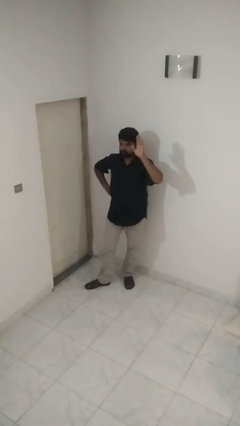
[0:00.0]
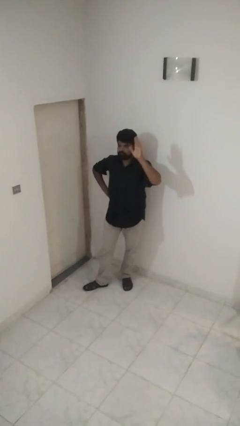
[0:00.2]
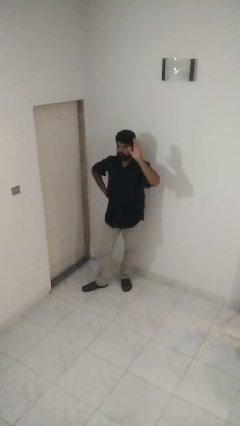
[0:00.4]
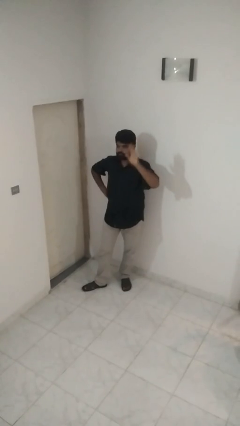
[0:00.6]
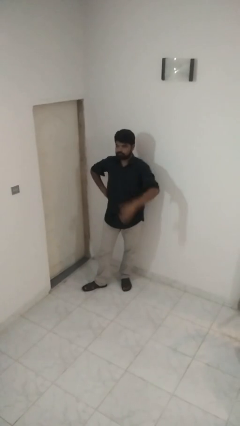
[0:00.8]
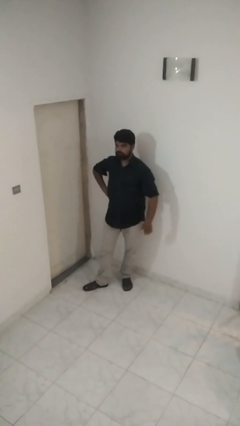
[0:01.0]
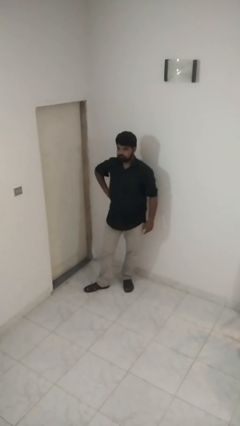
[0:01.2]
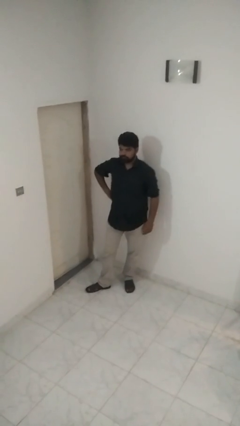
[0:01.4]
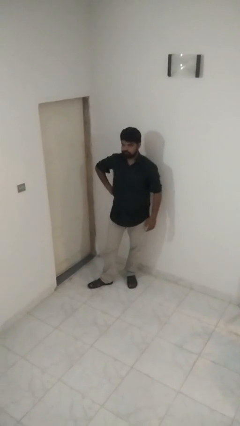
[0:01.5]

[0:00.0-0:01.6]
person gestures lower hand

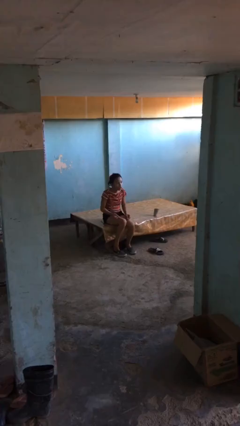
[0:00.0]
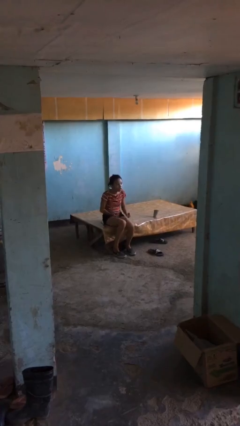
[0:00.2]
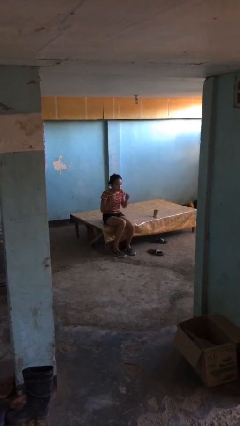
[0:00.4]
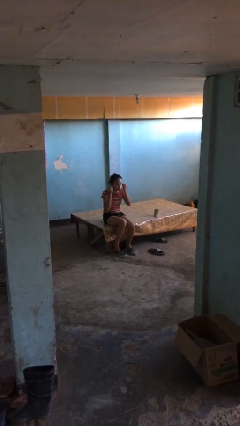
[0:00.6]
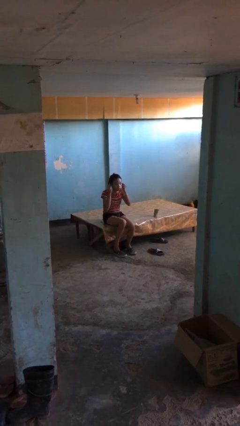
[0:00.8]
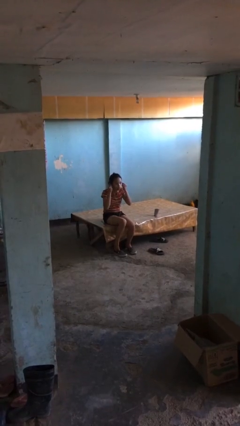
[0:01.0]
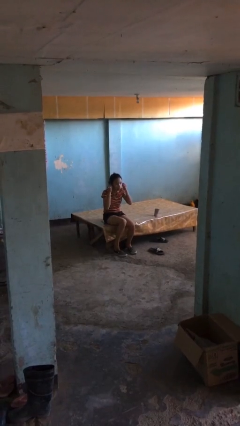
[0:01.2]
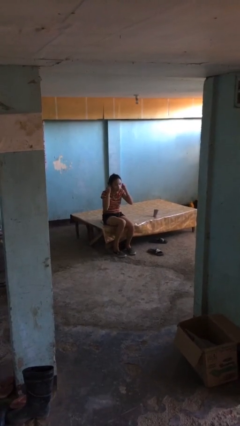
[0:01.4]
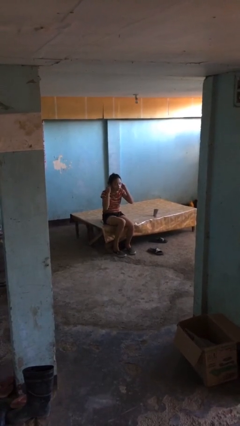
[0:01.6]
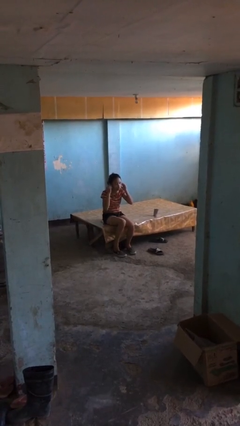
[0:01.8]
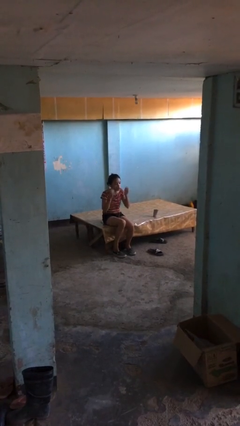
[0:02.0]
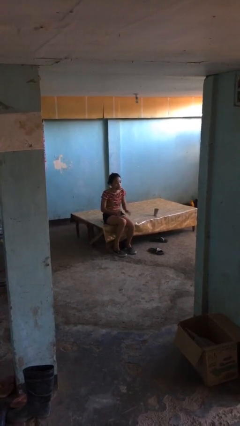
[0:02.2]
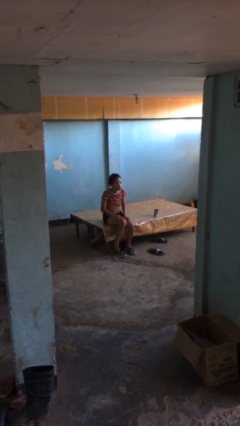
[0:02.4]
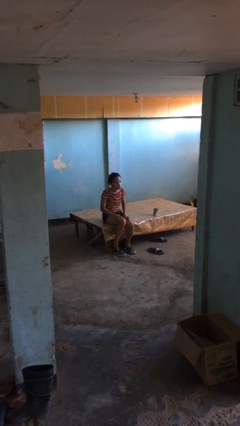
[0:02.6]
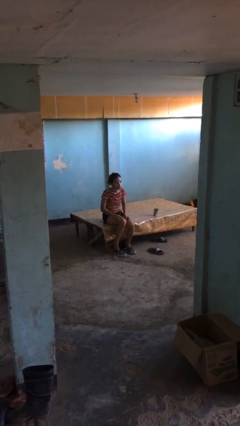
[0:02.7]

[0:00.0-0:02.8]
person puts on headphones

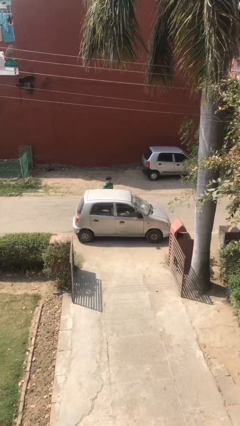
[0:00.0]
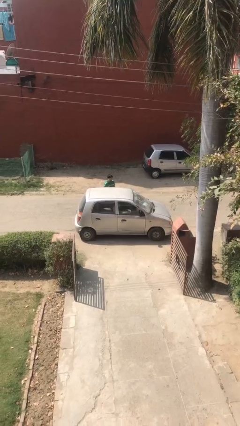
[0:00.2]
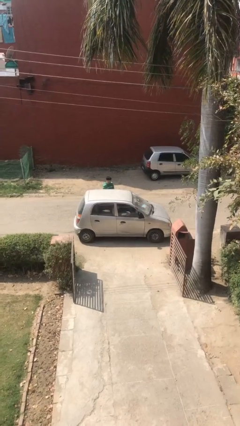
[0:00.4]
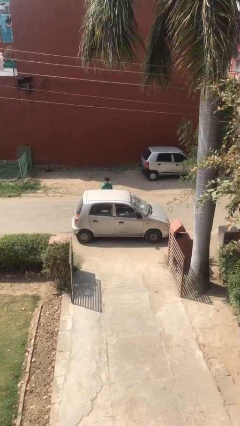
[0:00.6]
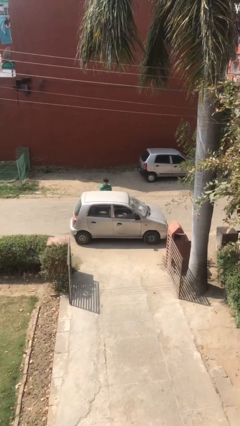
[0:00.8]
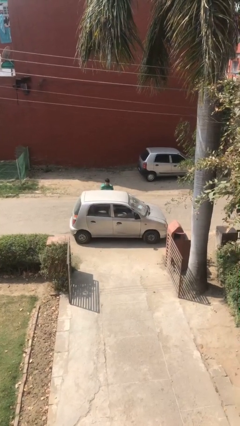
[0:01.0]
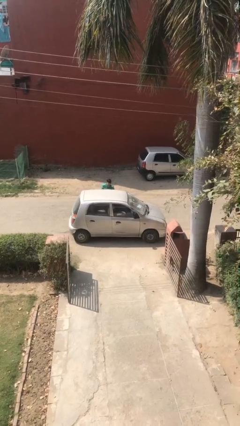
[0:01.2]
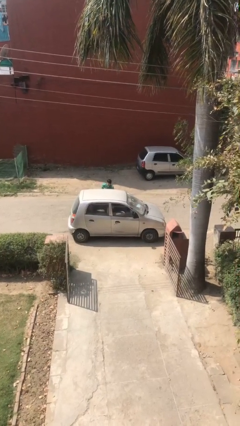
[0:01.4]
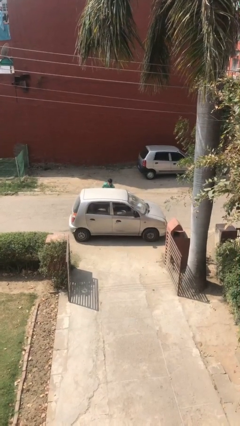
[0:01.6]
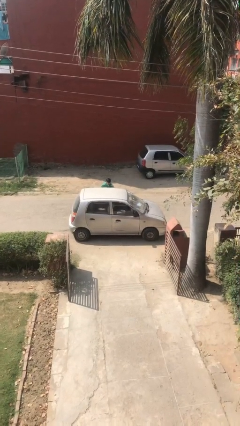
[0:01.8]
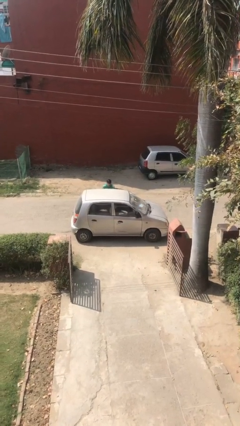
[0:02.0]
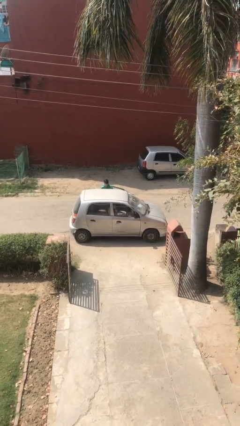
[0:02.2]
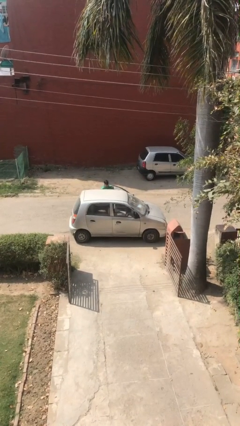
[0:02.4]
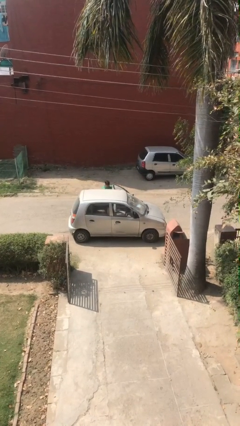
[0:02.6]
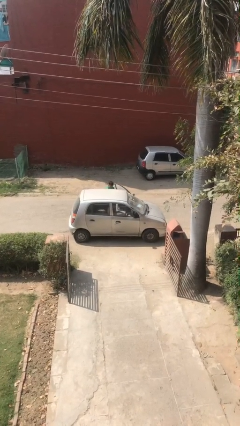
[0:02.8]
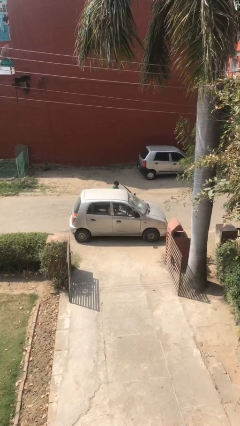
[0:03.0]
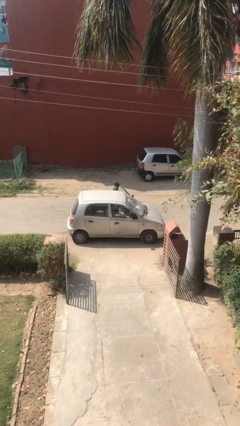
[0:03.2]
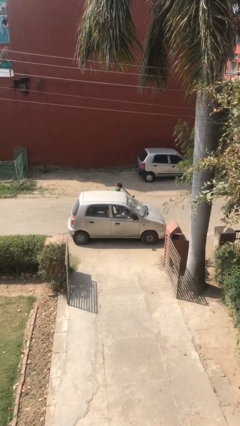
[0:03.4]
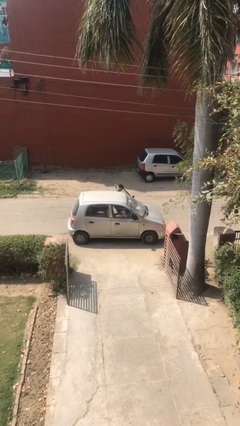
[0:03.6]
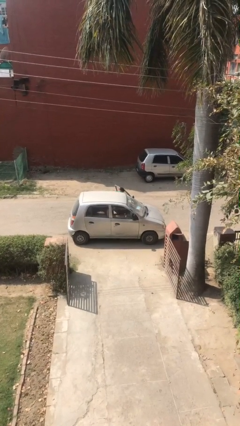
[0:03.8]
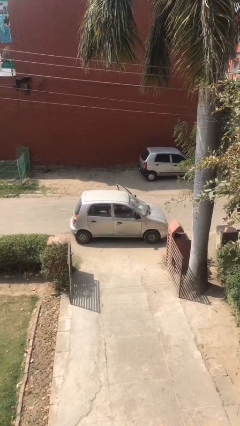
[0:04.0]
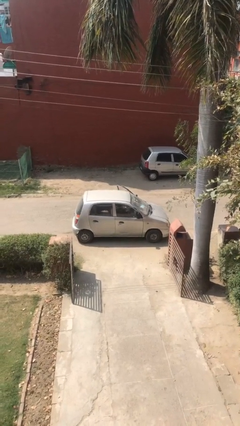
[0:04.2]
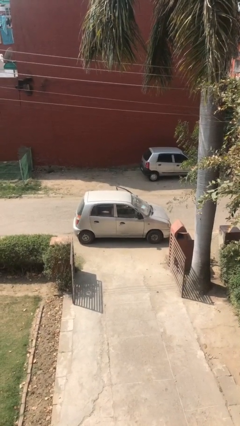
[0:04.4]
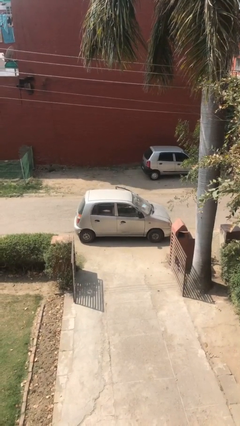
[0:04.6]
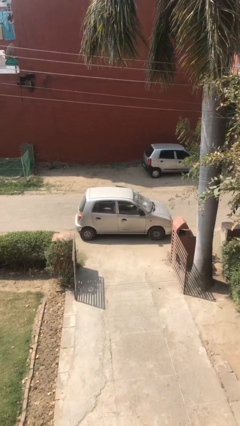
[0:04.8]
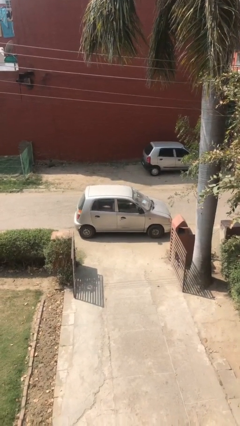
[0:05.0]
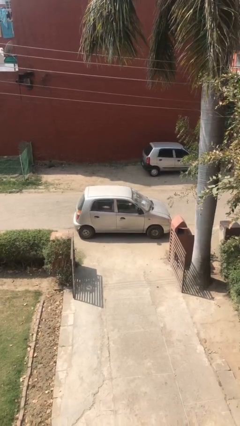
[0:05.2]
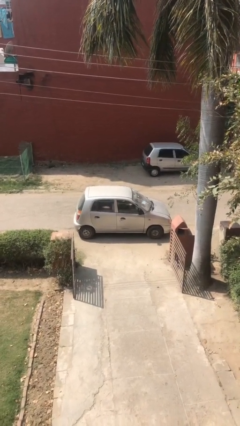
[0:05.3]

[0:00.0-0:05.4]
car picks up person

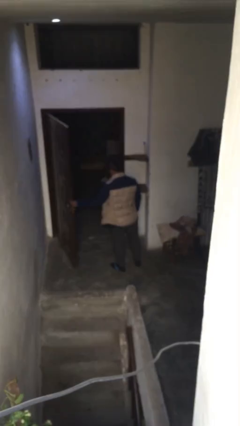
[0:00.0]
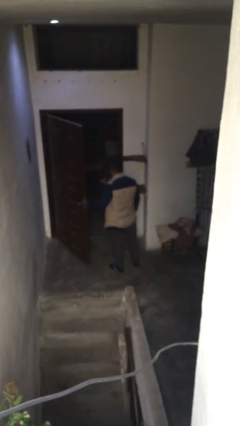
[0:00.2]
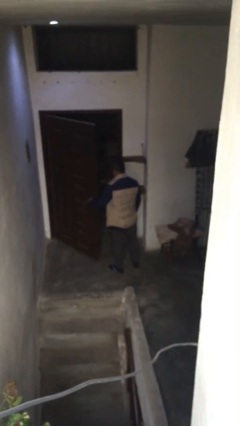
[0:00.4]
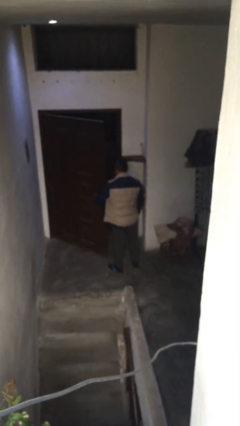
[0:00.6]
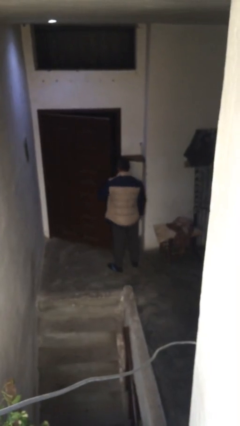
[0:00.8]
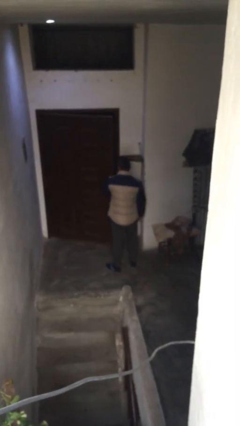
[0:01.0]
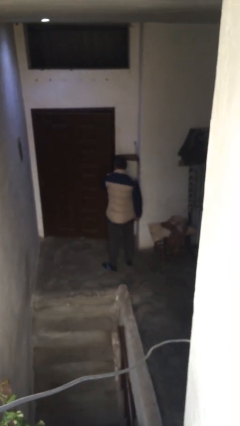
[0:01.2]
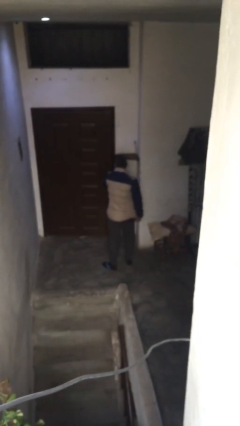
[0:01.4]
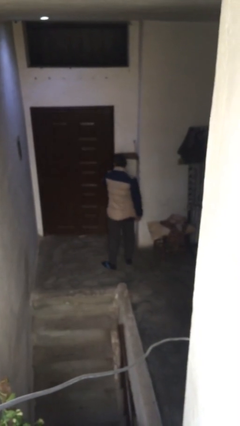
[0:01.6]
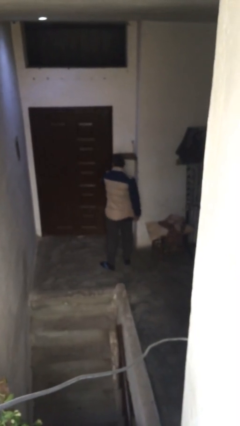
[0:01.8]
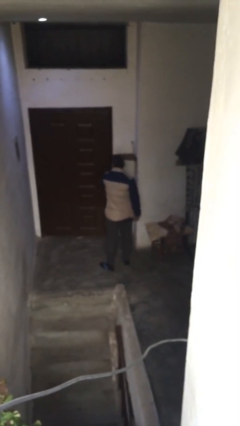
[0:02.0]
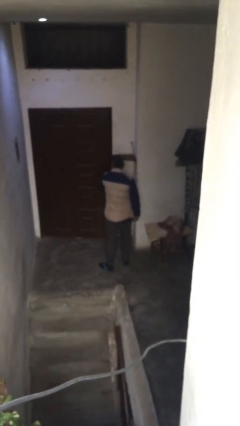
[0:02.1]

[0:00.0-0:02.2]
person closes facility door

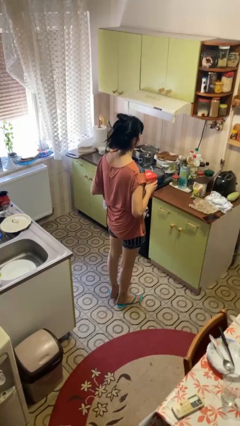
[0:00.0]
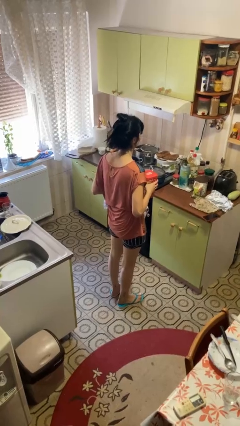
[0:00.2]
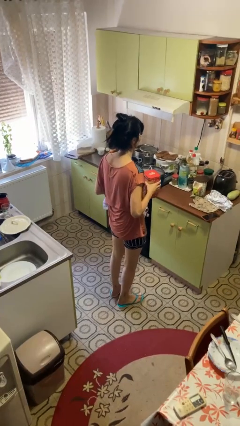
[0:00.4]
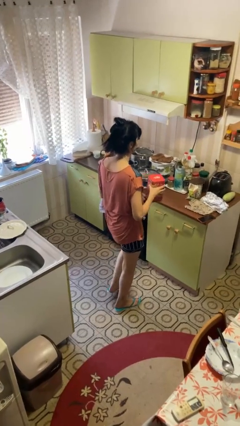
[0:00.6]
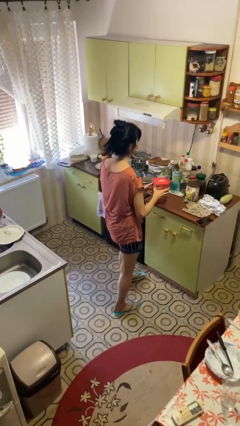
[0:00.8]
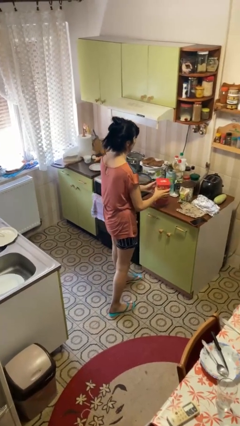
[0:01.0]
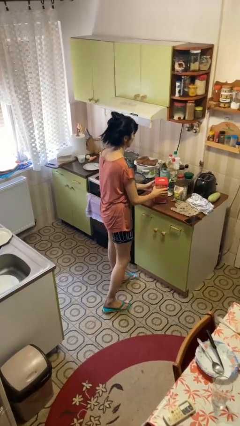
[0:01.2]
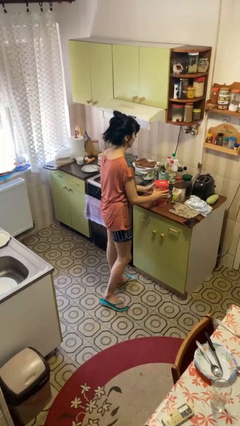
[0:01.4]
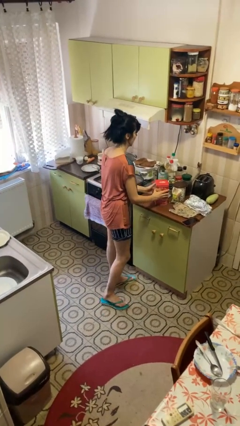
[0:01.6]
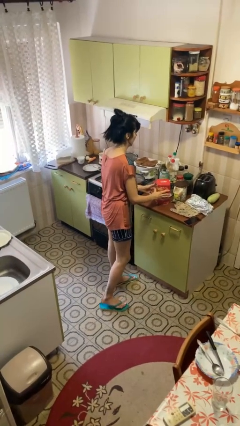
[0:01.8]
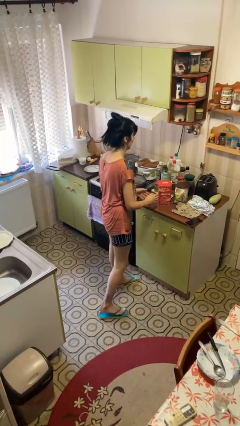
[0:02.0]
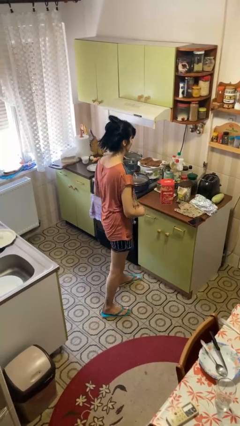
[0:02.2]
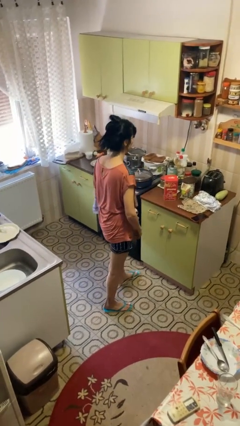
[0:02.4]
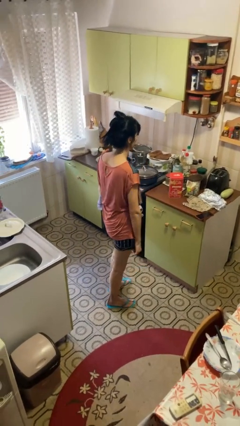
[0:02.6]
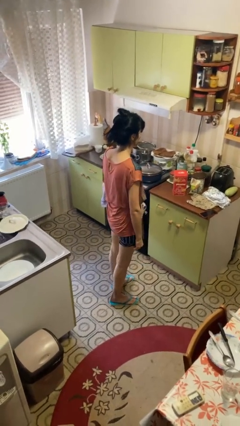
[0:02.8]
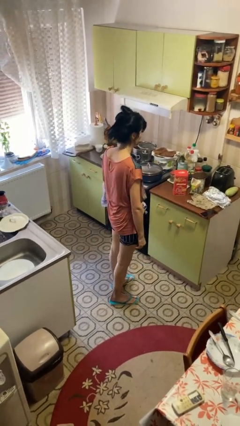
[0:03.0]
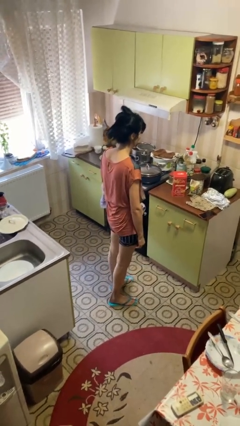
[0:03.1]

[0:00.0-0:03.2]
person puts down object on countertop

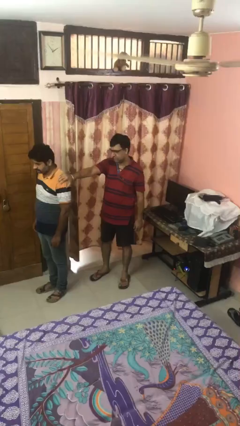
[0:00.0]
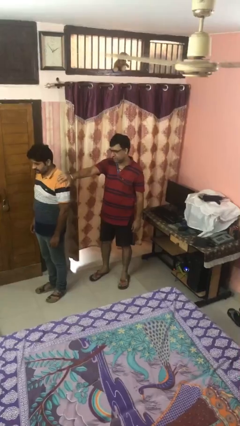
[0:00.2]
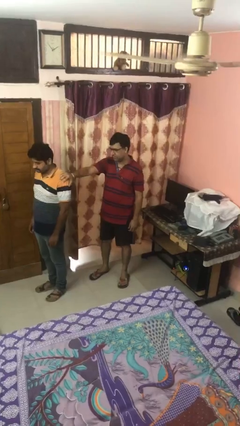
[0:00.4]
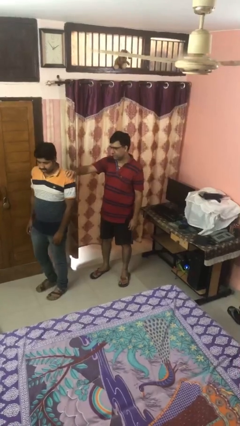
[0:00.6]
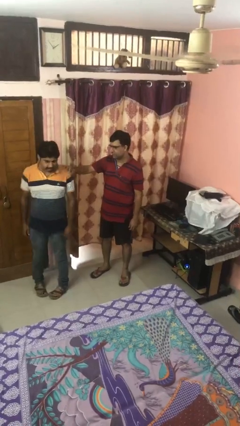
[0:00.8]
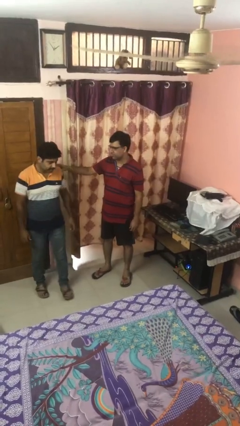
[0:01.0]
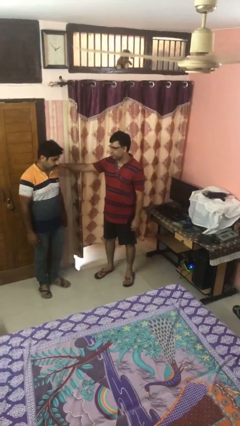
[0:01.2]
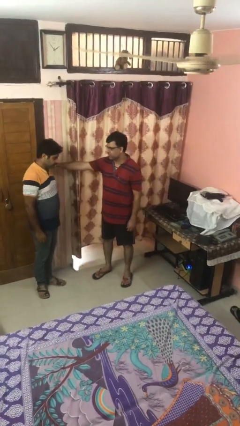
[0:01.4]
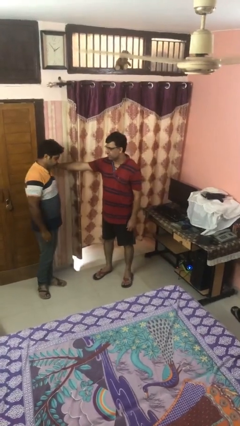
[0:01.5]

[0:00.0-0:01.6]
person spins person around

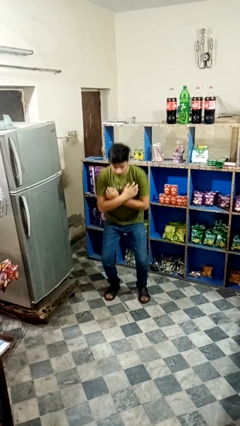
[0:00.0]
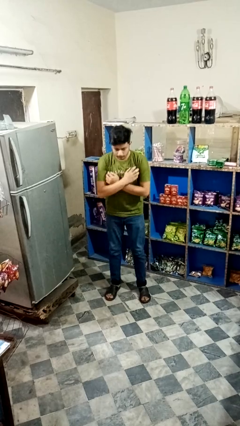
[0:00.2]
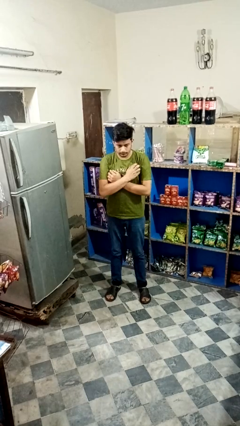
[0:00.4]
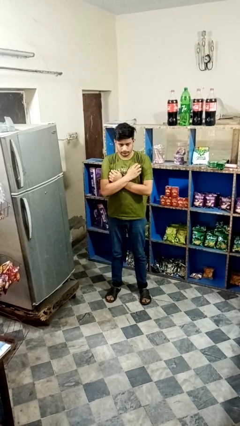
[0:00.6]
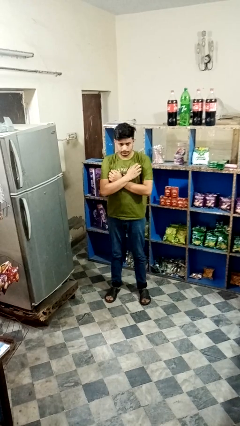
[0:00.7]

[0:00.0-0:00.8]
person stands up
